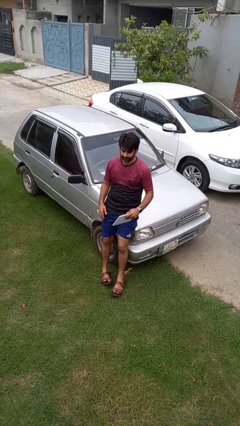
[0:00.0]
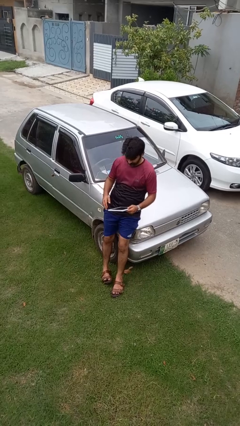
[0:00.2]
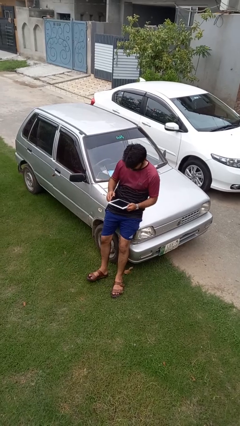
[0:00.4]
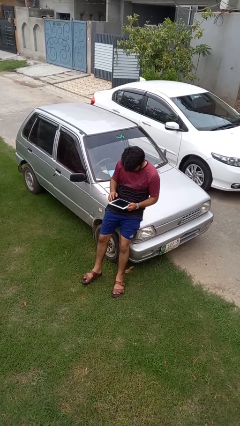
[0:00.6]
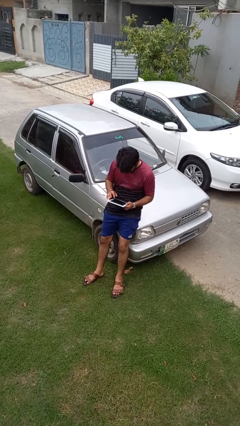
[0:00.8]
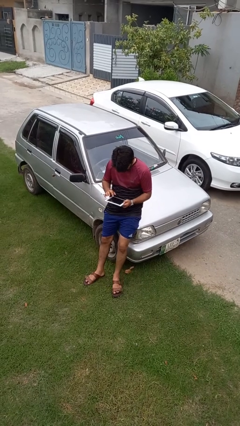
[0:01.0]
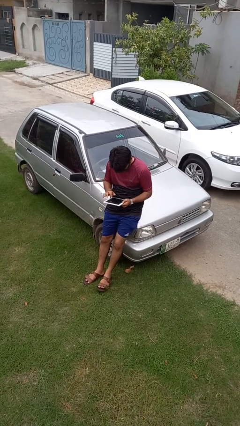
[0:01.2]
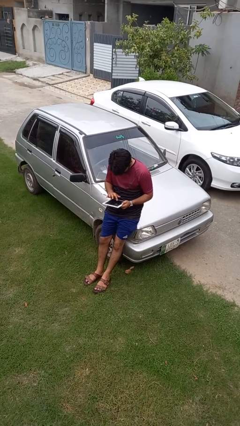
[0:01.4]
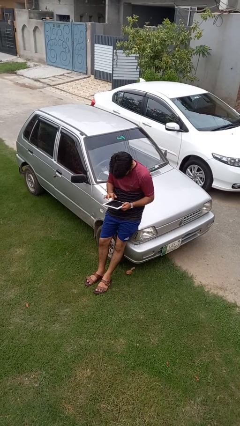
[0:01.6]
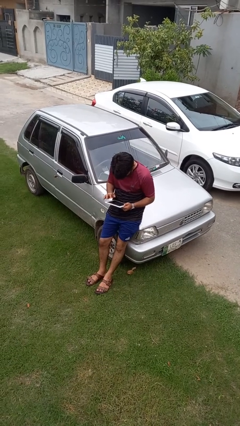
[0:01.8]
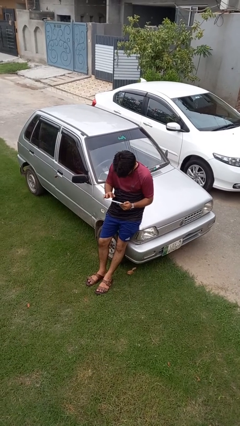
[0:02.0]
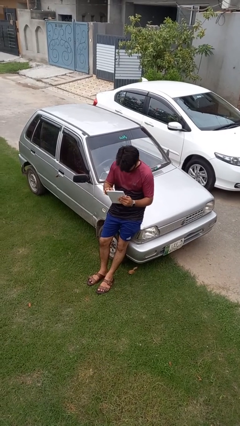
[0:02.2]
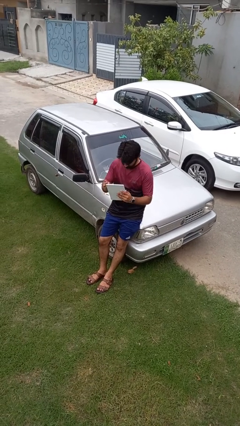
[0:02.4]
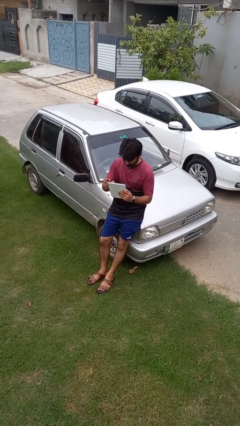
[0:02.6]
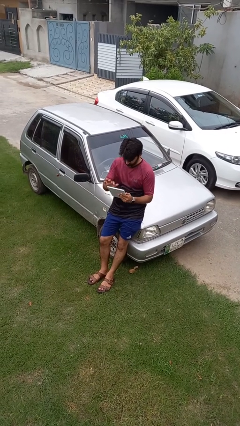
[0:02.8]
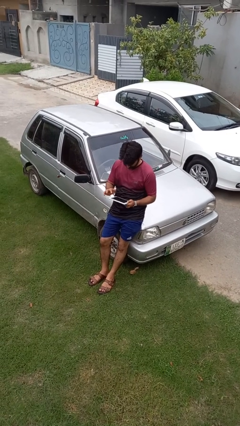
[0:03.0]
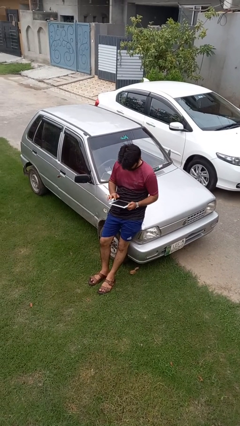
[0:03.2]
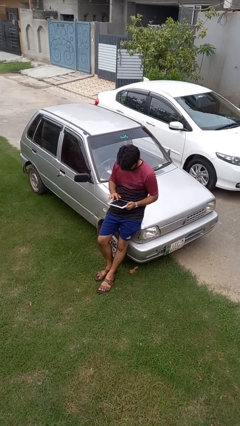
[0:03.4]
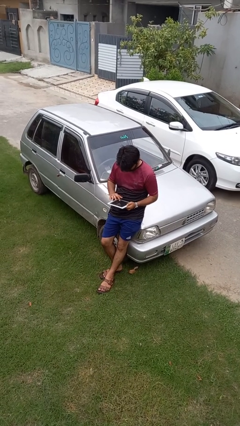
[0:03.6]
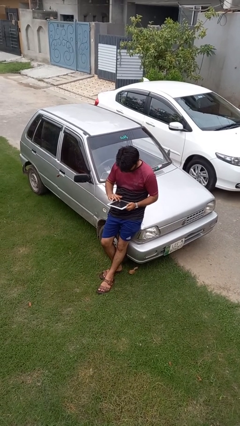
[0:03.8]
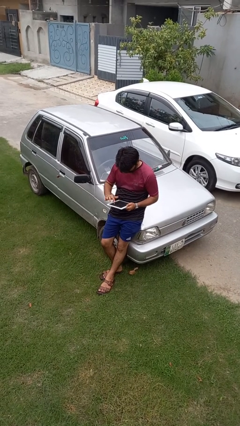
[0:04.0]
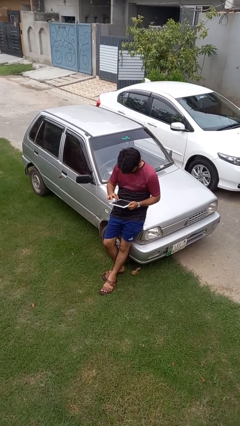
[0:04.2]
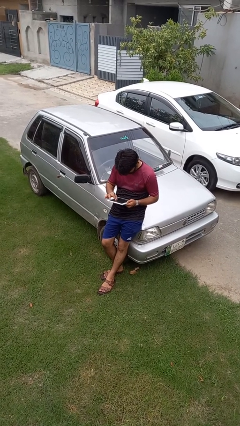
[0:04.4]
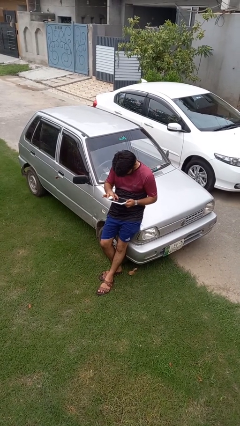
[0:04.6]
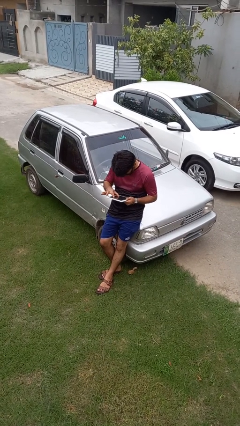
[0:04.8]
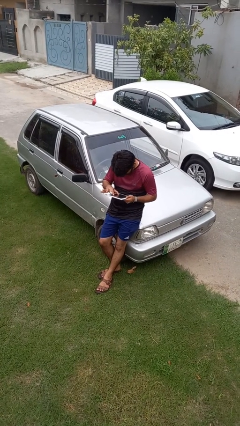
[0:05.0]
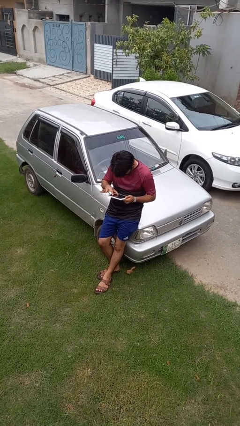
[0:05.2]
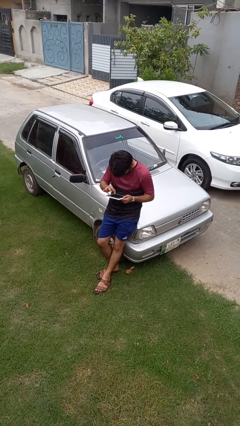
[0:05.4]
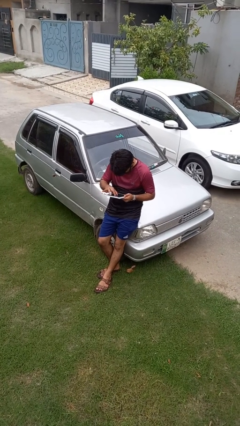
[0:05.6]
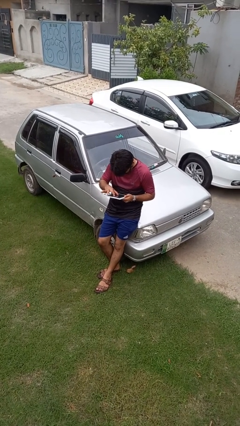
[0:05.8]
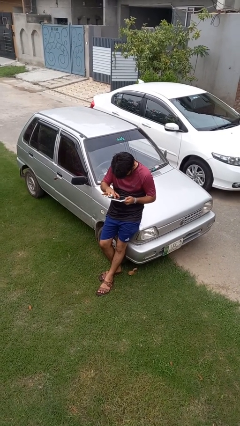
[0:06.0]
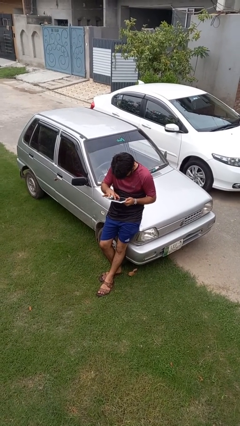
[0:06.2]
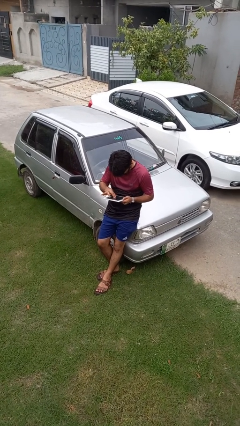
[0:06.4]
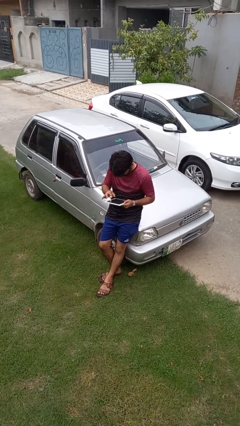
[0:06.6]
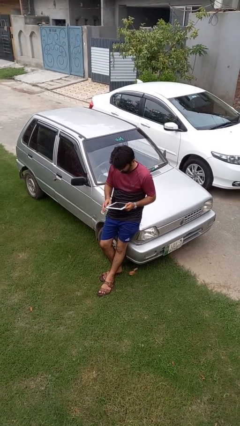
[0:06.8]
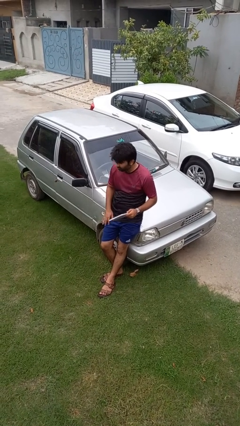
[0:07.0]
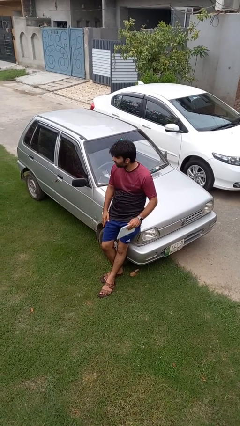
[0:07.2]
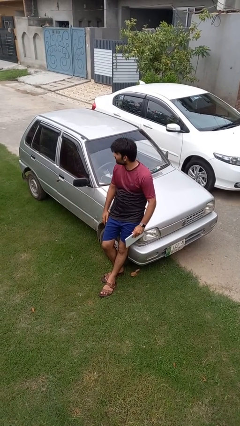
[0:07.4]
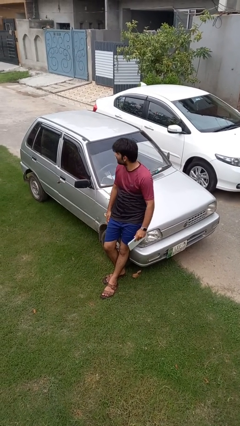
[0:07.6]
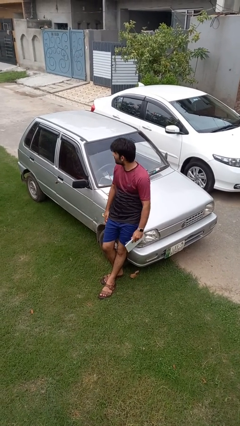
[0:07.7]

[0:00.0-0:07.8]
person interacts with tablet

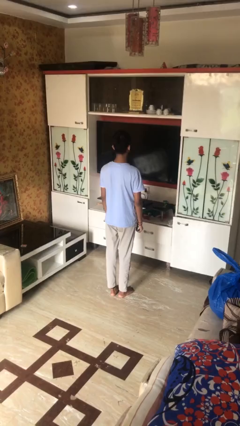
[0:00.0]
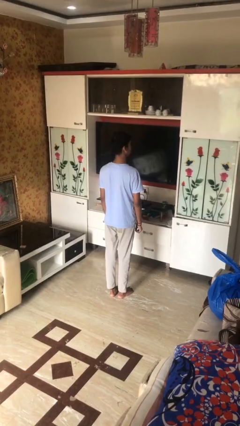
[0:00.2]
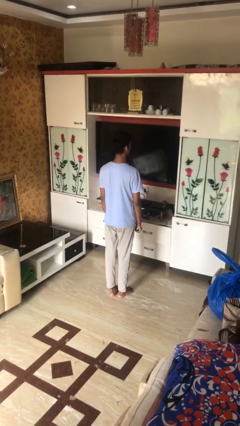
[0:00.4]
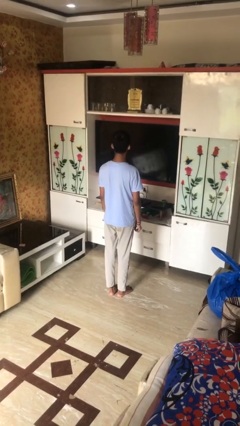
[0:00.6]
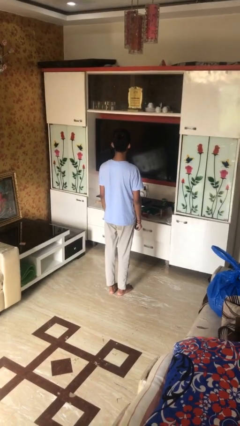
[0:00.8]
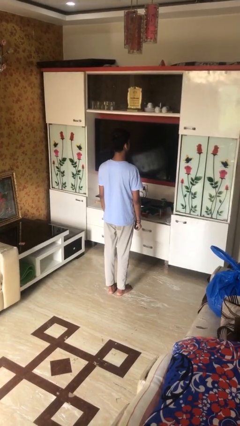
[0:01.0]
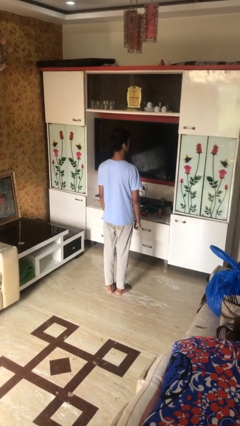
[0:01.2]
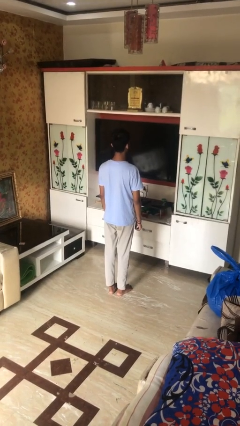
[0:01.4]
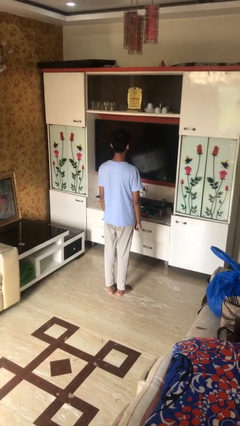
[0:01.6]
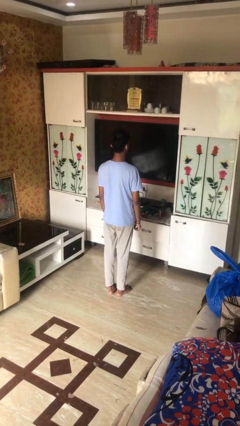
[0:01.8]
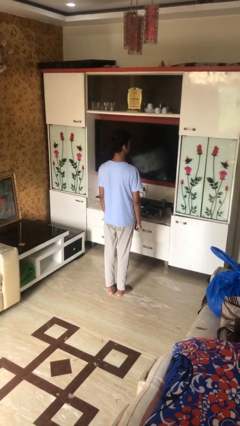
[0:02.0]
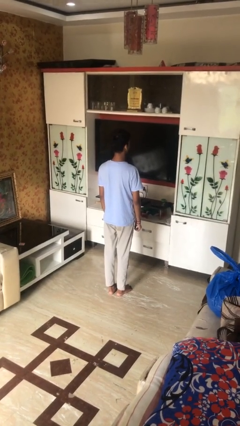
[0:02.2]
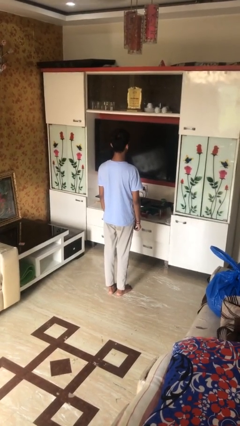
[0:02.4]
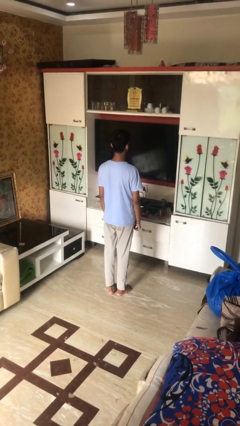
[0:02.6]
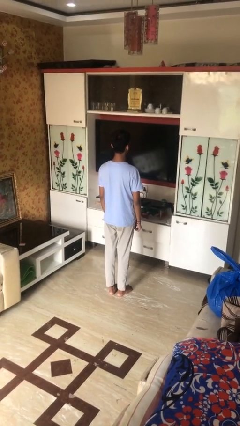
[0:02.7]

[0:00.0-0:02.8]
person shakes head

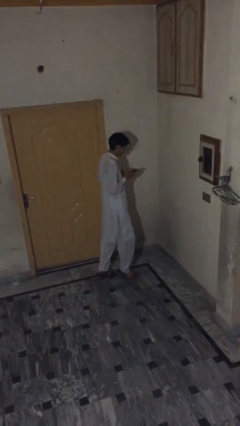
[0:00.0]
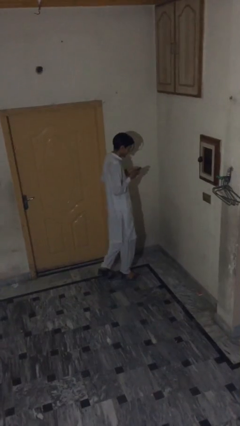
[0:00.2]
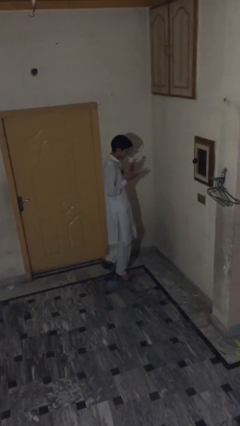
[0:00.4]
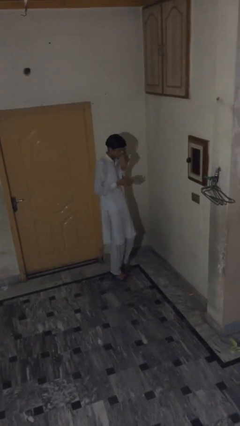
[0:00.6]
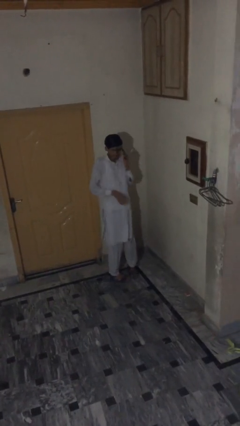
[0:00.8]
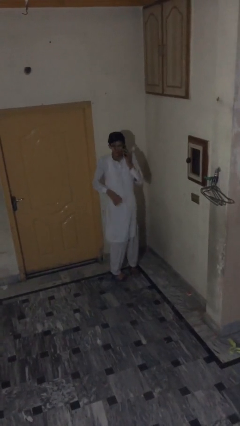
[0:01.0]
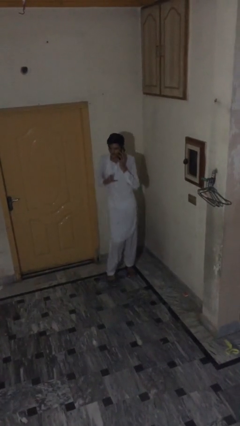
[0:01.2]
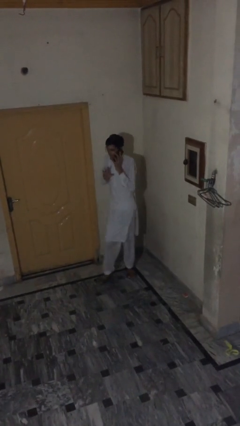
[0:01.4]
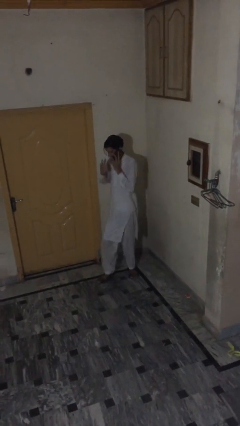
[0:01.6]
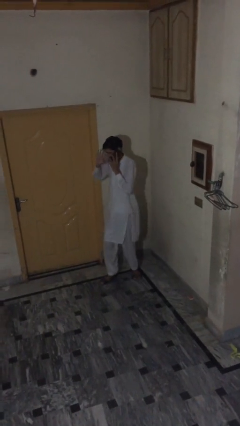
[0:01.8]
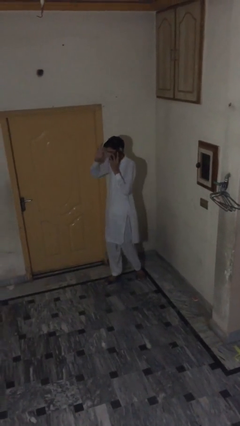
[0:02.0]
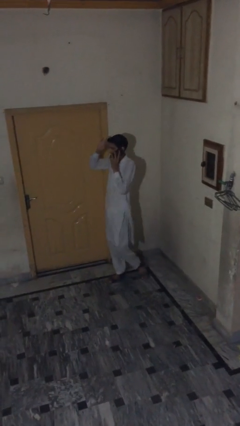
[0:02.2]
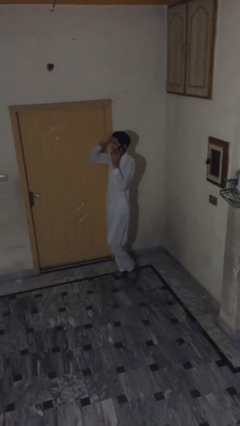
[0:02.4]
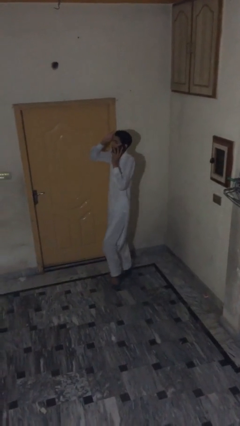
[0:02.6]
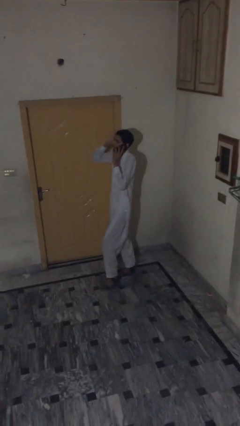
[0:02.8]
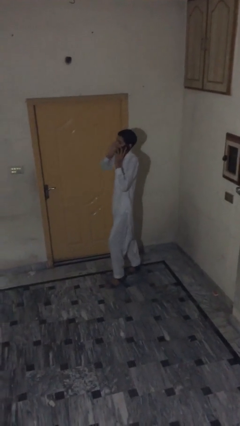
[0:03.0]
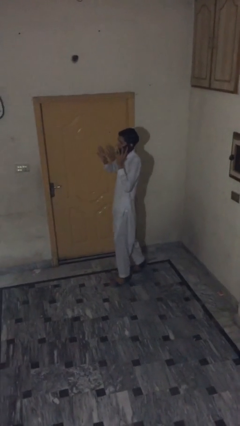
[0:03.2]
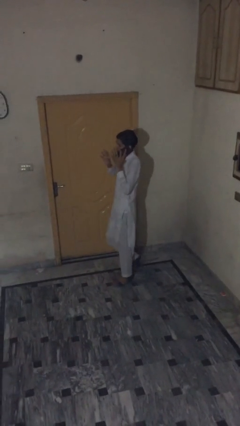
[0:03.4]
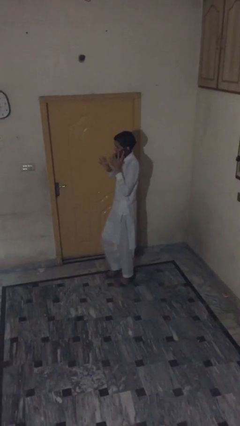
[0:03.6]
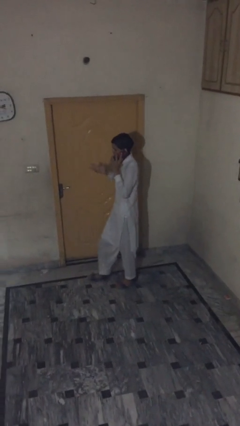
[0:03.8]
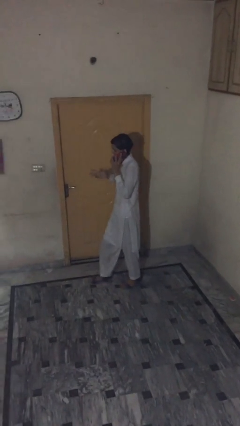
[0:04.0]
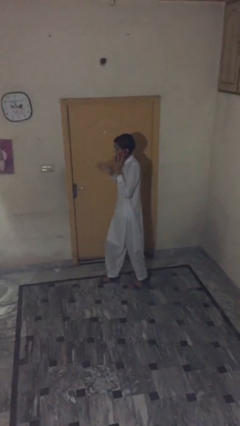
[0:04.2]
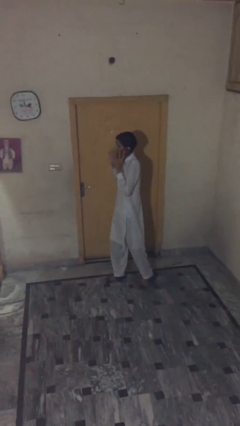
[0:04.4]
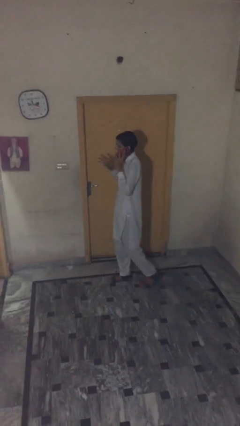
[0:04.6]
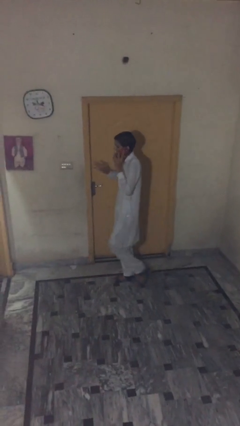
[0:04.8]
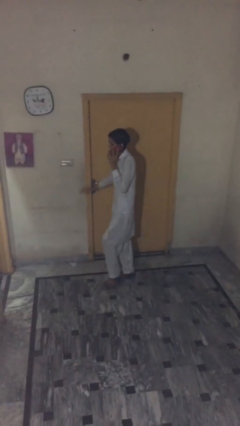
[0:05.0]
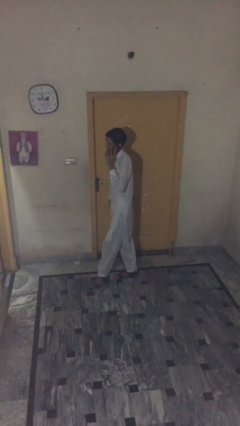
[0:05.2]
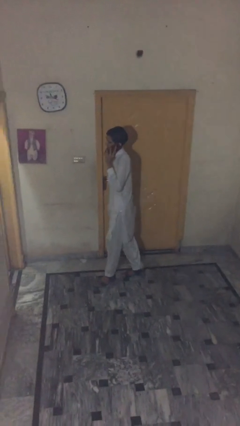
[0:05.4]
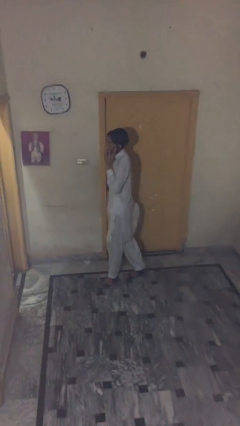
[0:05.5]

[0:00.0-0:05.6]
person talks on phone

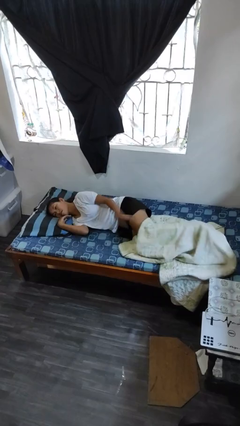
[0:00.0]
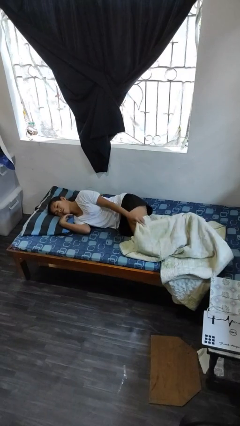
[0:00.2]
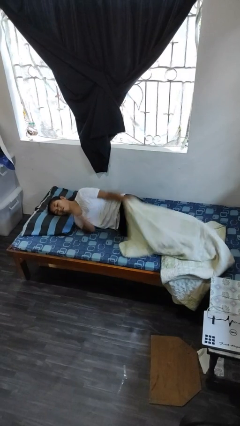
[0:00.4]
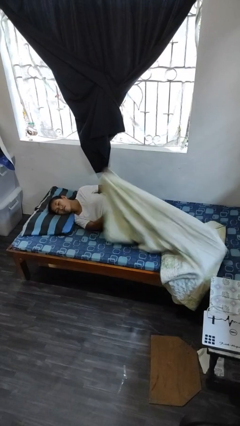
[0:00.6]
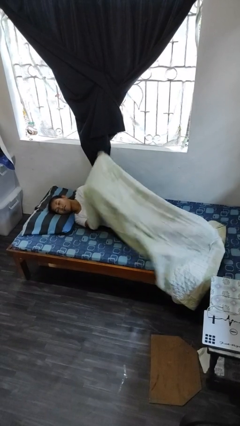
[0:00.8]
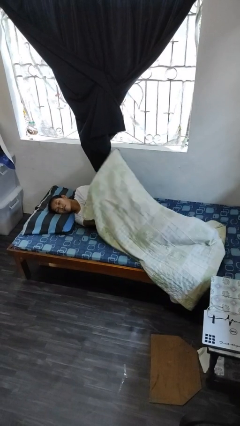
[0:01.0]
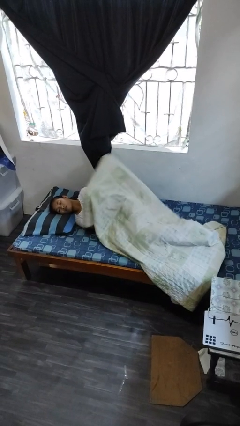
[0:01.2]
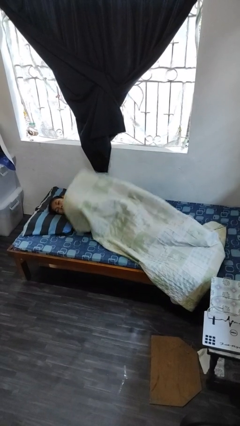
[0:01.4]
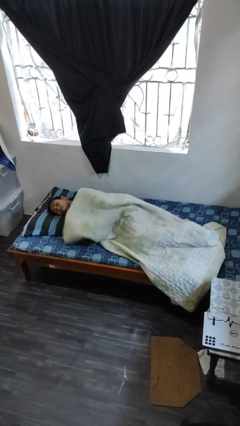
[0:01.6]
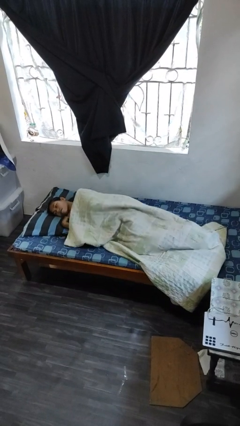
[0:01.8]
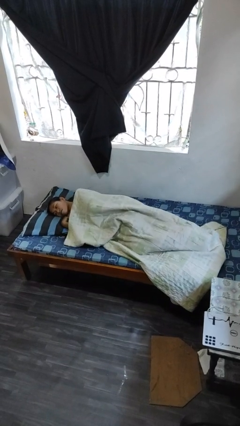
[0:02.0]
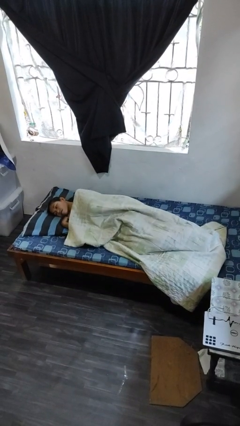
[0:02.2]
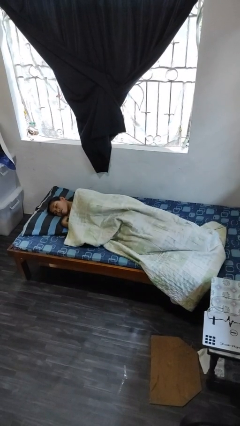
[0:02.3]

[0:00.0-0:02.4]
person covers with bedsheets
